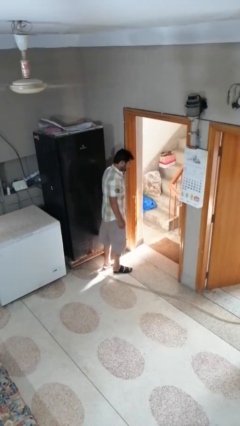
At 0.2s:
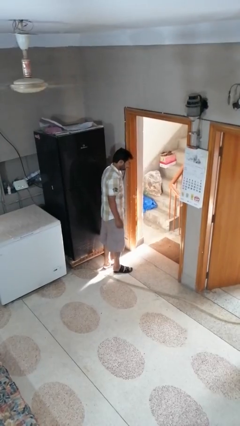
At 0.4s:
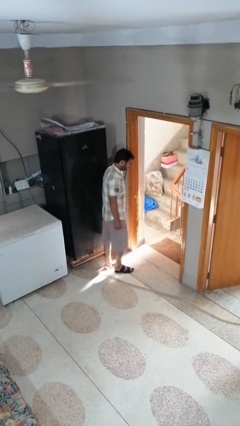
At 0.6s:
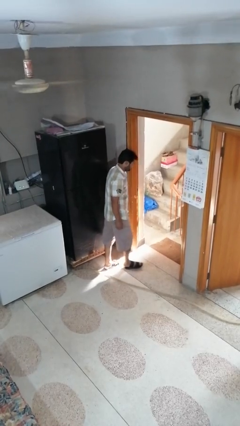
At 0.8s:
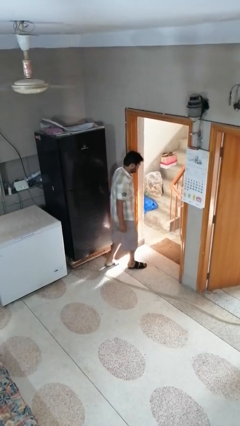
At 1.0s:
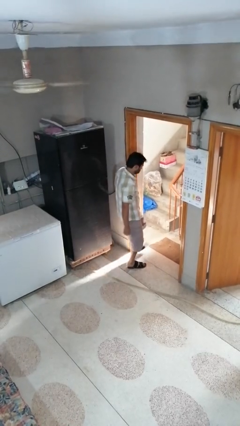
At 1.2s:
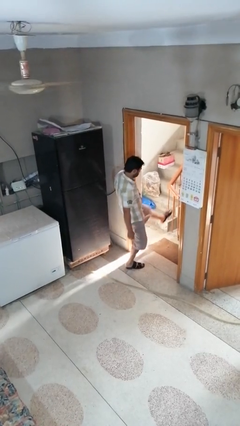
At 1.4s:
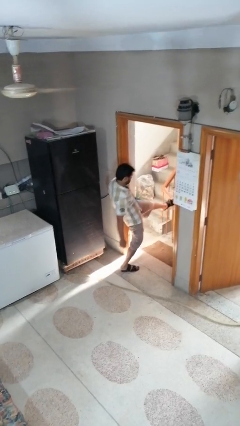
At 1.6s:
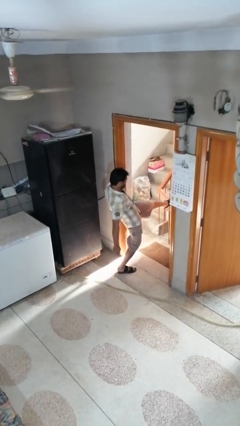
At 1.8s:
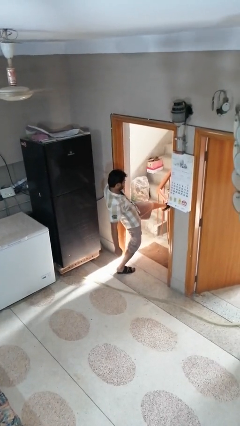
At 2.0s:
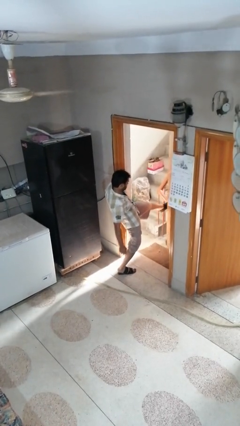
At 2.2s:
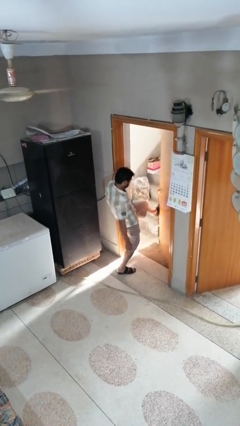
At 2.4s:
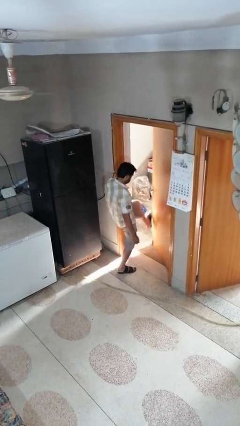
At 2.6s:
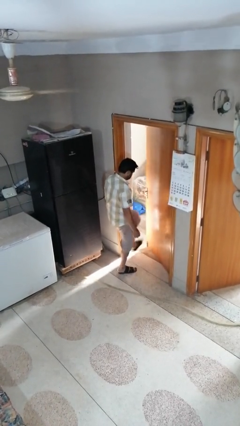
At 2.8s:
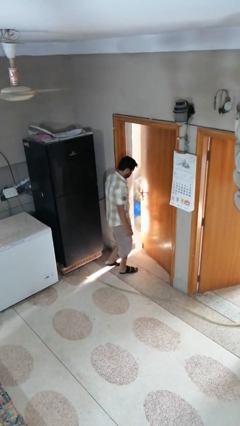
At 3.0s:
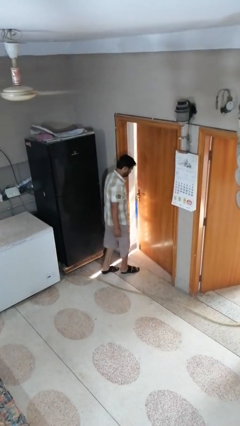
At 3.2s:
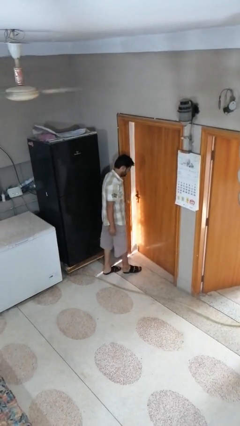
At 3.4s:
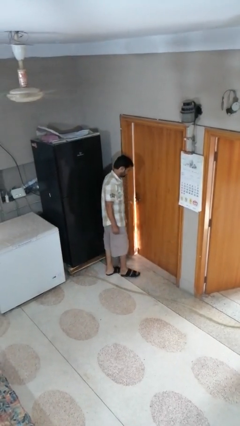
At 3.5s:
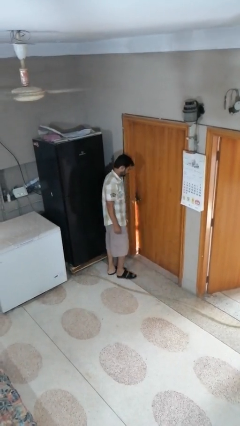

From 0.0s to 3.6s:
person closes door with foot

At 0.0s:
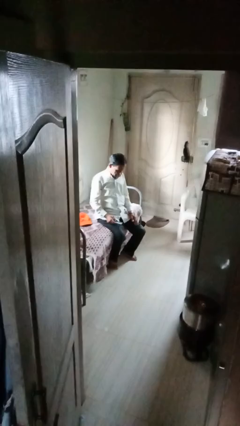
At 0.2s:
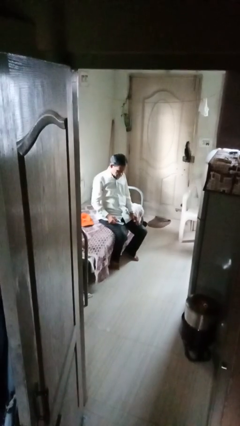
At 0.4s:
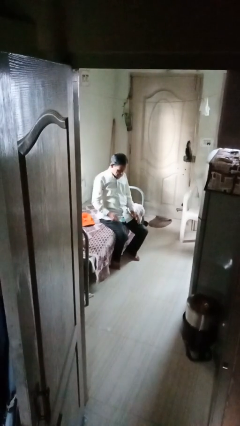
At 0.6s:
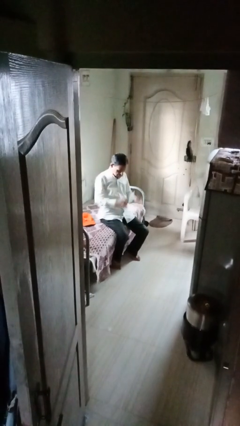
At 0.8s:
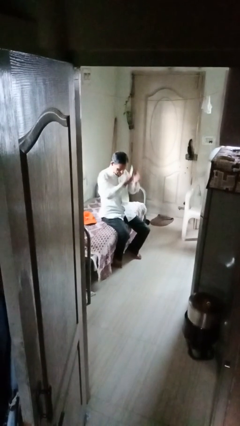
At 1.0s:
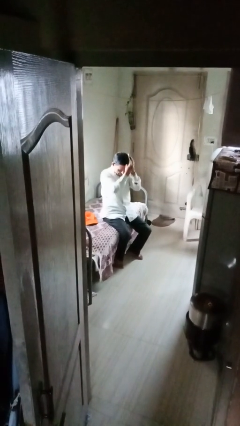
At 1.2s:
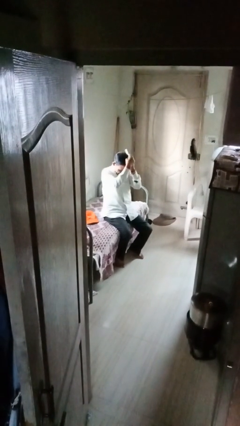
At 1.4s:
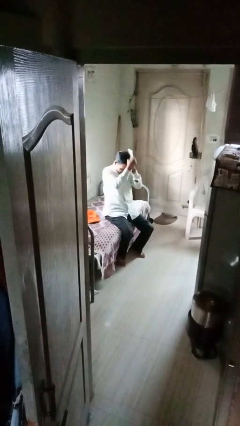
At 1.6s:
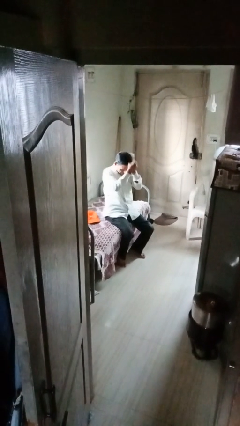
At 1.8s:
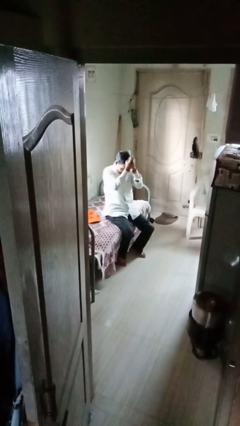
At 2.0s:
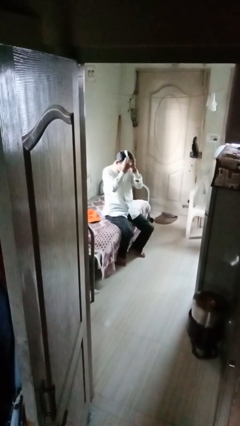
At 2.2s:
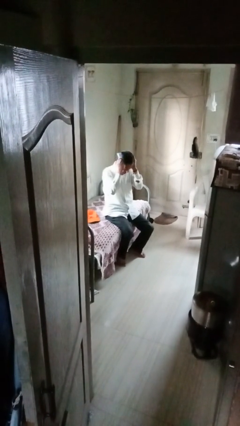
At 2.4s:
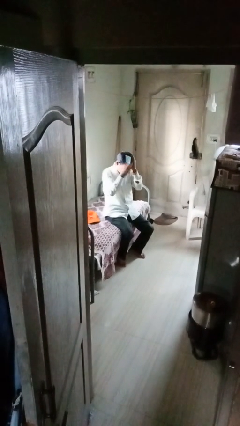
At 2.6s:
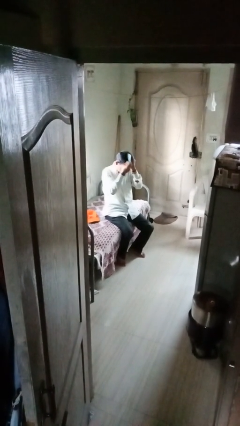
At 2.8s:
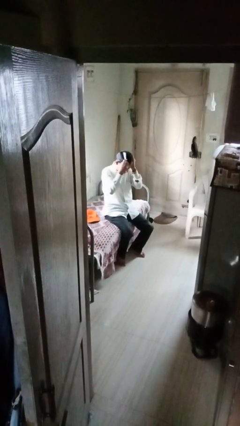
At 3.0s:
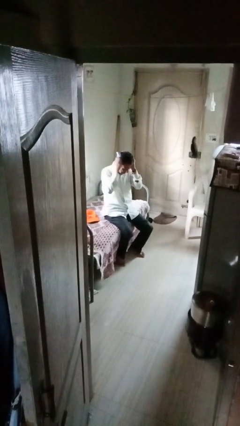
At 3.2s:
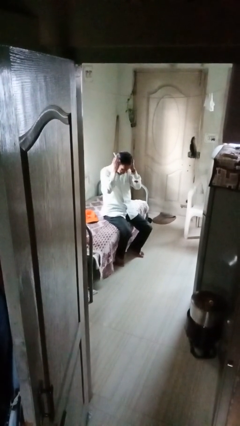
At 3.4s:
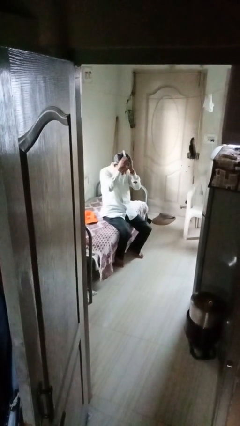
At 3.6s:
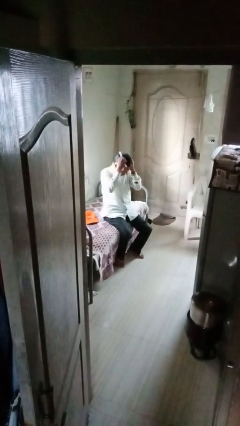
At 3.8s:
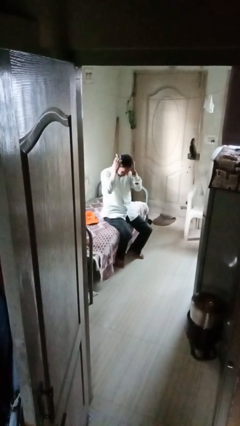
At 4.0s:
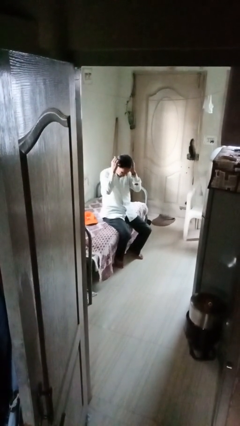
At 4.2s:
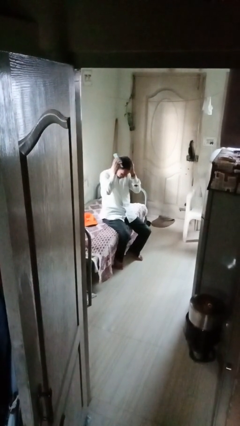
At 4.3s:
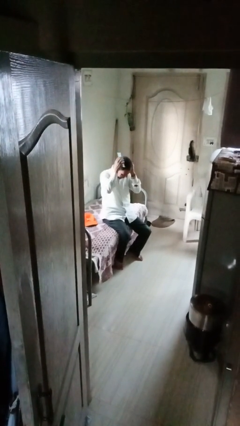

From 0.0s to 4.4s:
person brushes hair

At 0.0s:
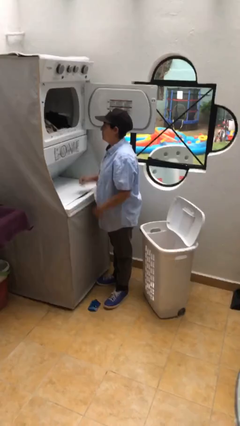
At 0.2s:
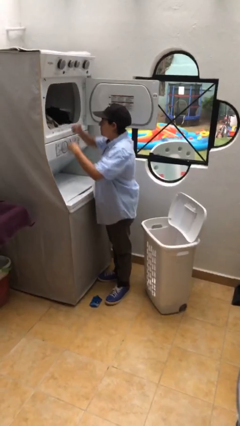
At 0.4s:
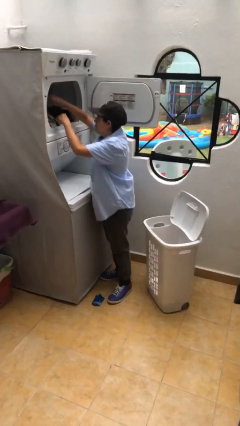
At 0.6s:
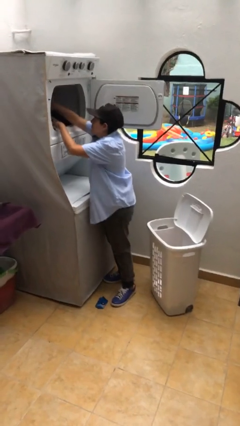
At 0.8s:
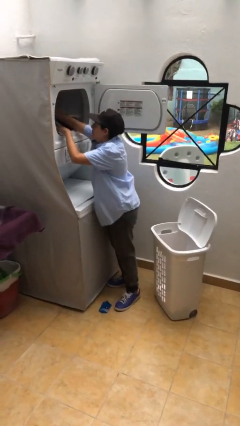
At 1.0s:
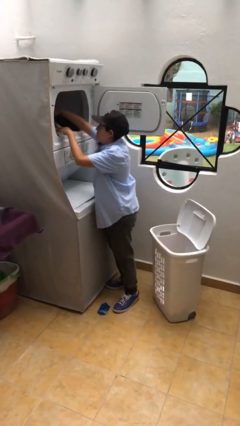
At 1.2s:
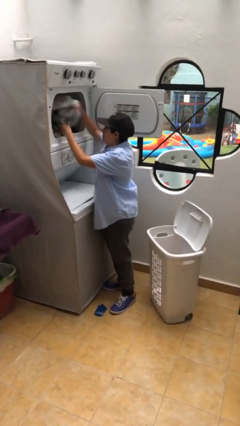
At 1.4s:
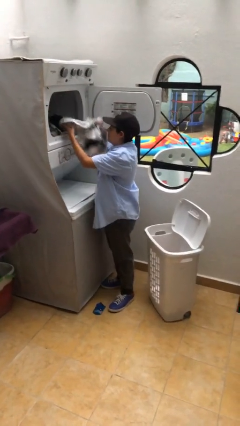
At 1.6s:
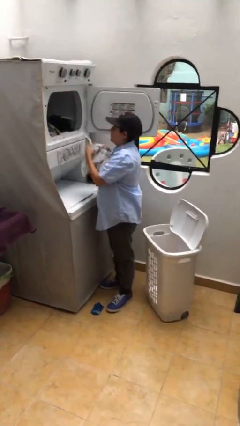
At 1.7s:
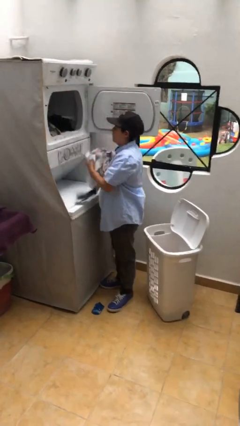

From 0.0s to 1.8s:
person unloads dryer

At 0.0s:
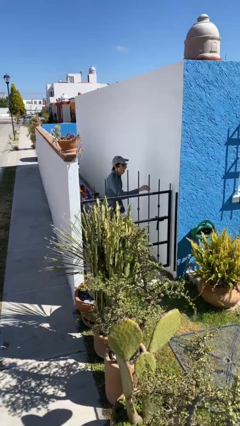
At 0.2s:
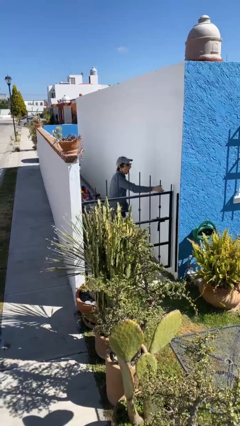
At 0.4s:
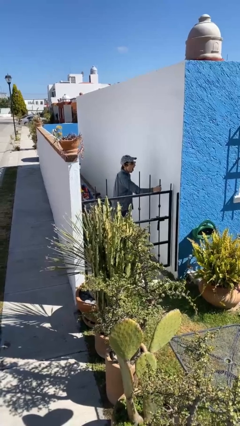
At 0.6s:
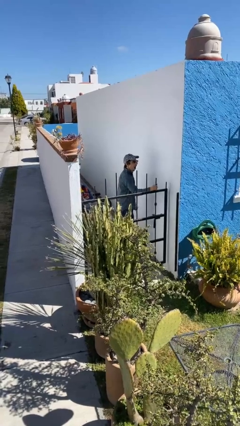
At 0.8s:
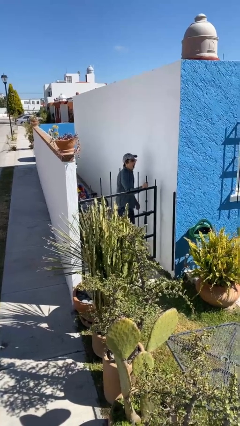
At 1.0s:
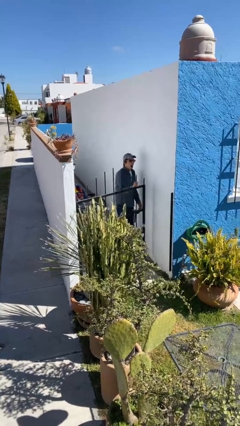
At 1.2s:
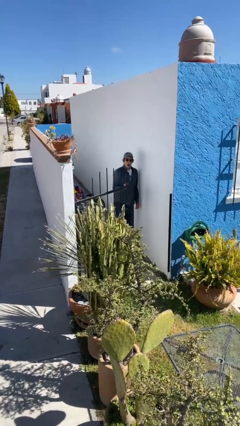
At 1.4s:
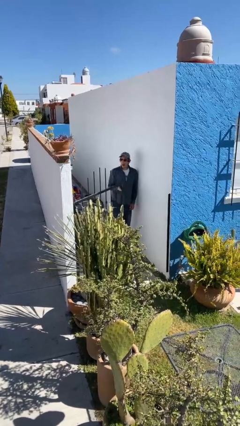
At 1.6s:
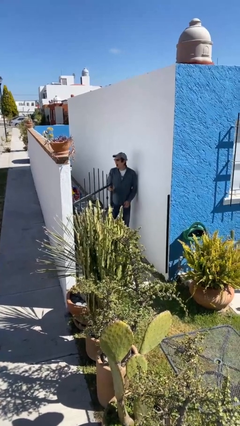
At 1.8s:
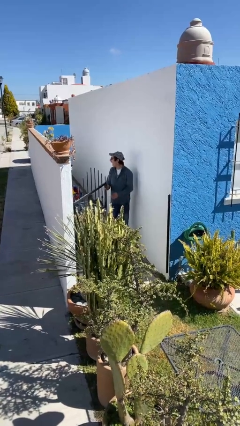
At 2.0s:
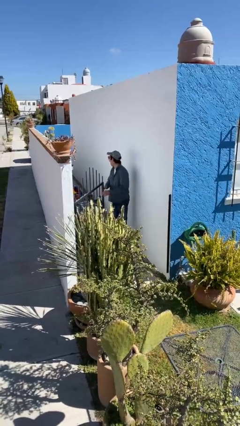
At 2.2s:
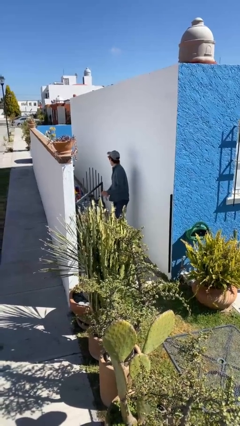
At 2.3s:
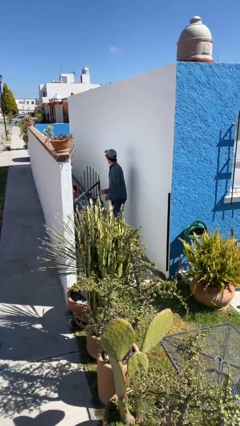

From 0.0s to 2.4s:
person opens facility door

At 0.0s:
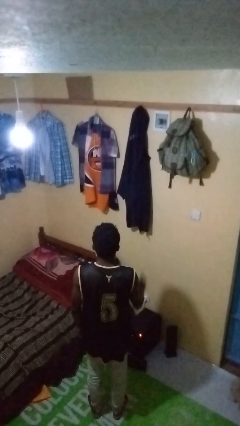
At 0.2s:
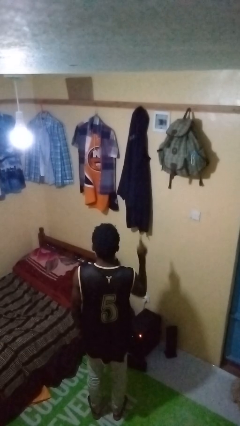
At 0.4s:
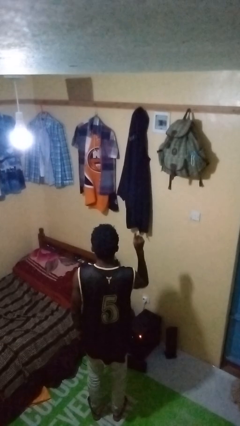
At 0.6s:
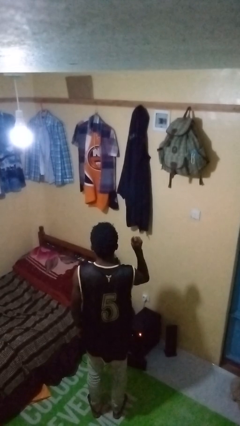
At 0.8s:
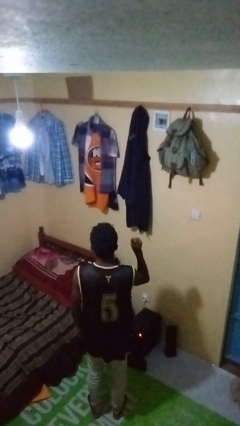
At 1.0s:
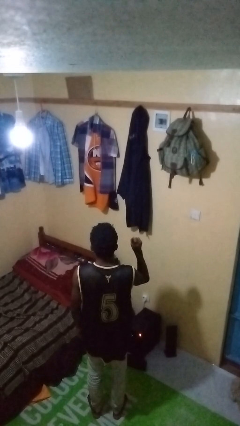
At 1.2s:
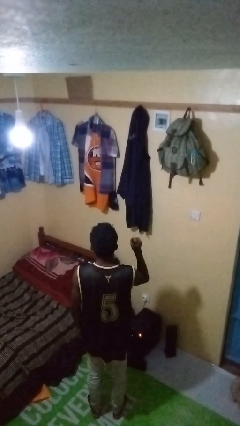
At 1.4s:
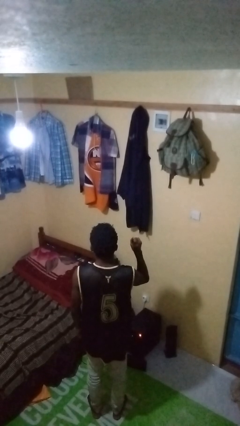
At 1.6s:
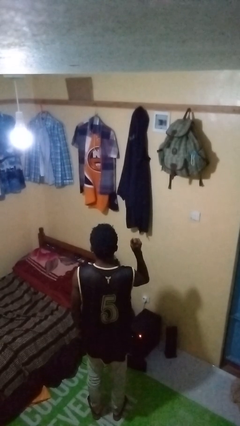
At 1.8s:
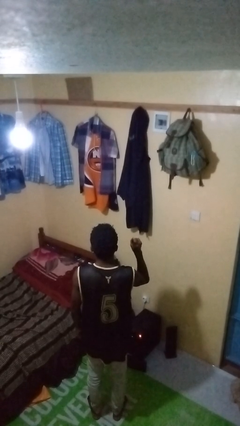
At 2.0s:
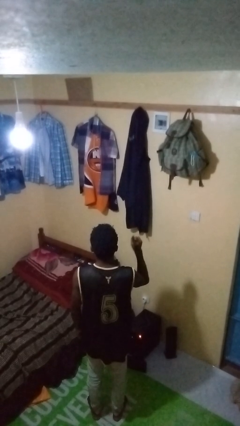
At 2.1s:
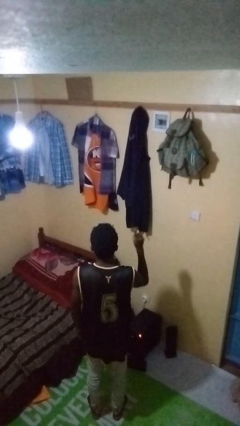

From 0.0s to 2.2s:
person gestures number one

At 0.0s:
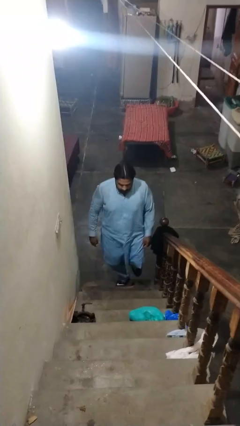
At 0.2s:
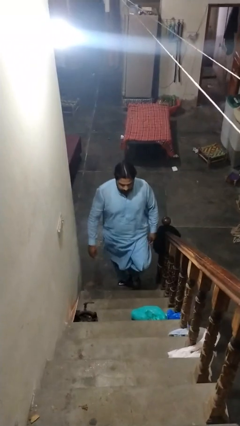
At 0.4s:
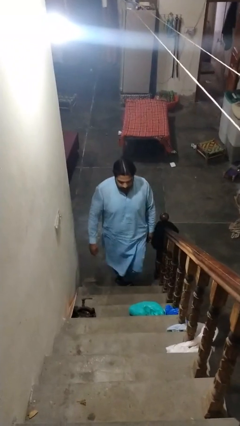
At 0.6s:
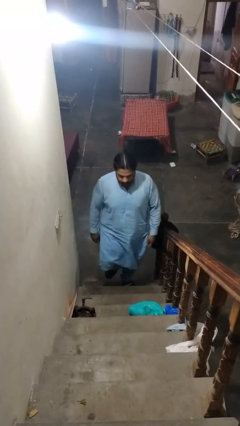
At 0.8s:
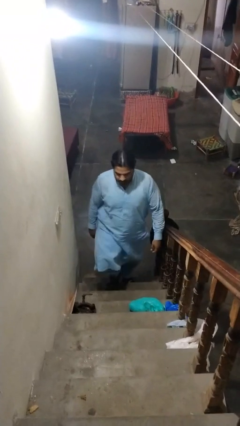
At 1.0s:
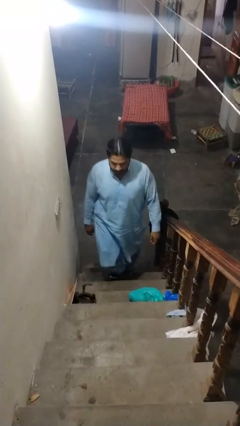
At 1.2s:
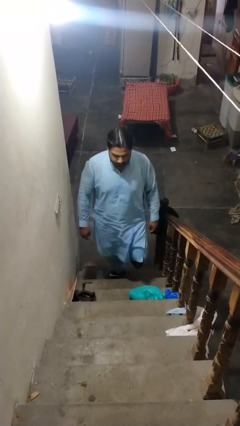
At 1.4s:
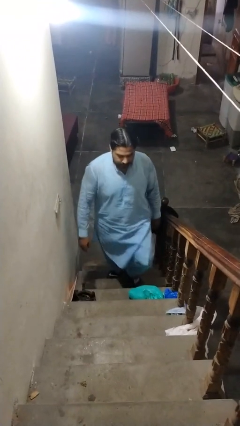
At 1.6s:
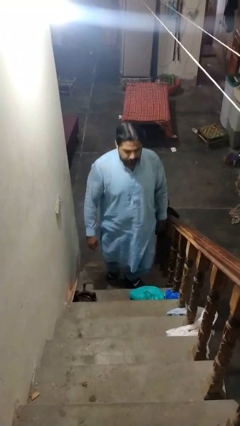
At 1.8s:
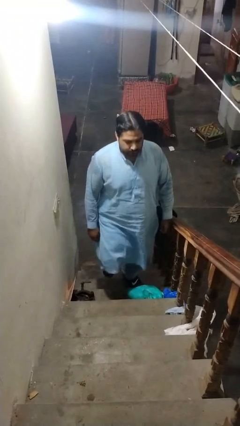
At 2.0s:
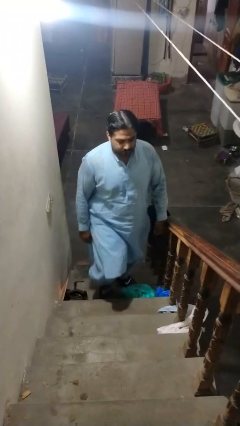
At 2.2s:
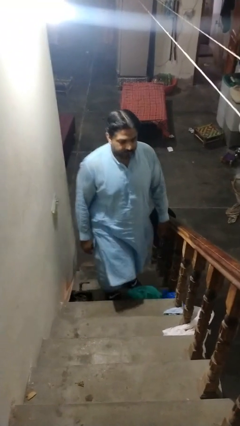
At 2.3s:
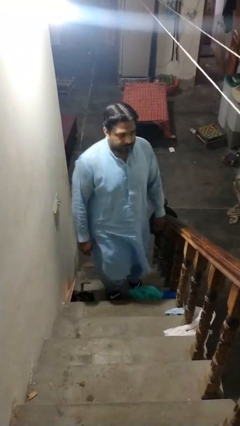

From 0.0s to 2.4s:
person climbs up stairs

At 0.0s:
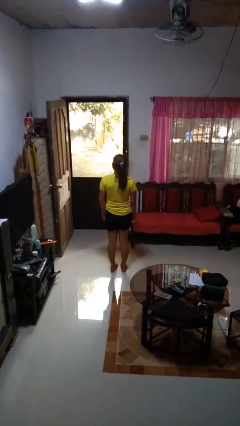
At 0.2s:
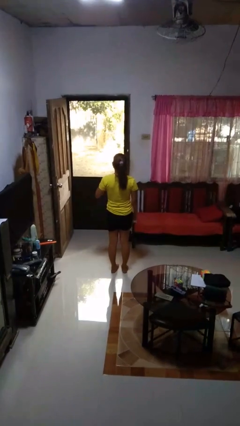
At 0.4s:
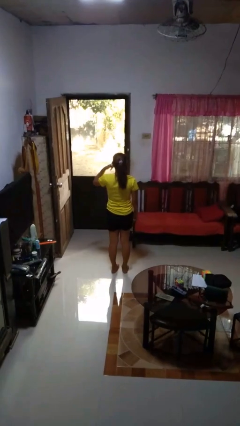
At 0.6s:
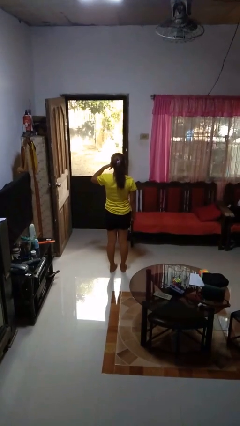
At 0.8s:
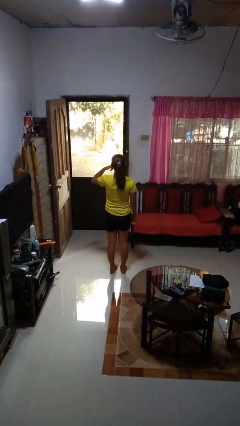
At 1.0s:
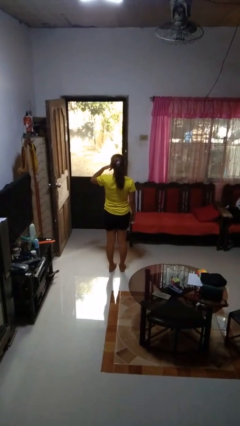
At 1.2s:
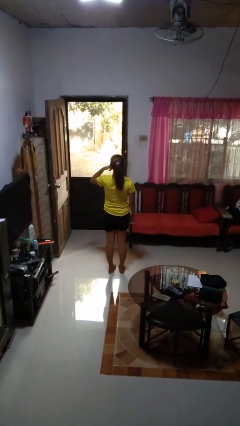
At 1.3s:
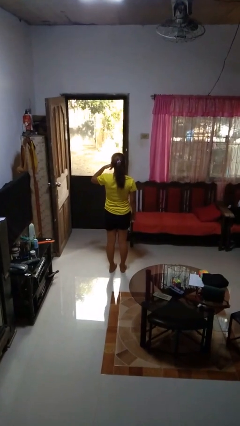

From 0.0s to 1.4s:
person gestures call me
